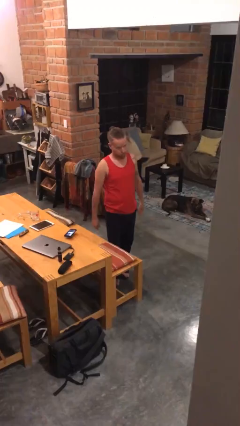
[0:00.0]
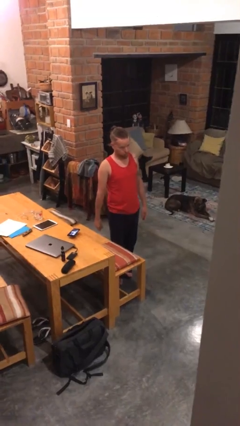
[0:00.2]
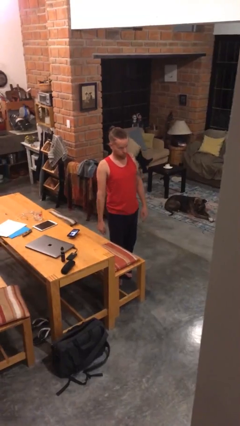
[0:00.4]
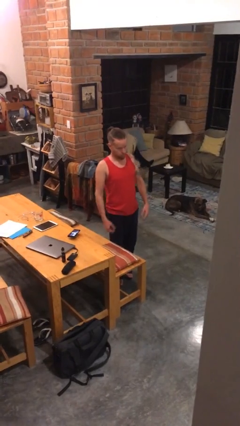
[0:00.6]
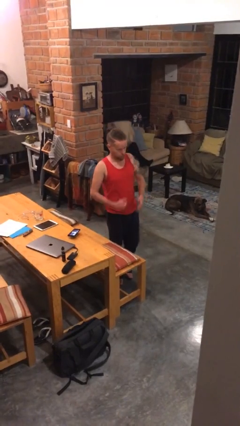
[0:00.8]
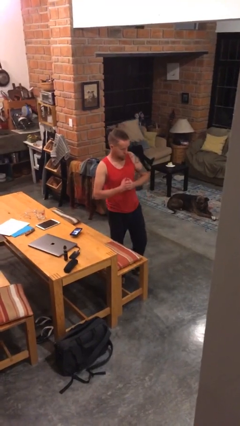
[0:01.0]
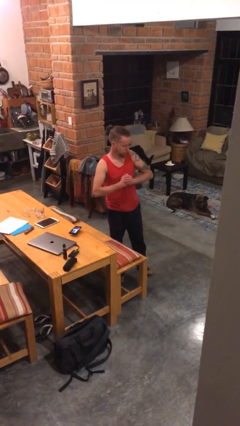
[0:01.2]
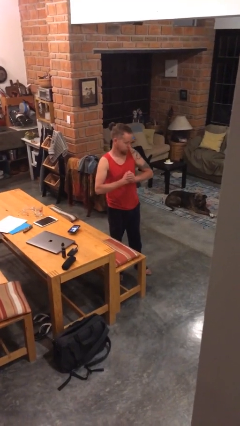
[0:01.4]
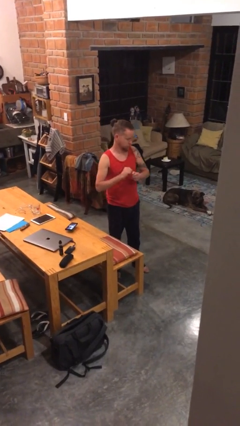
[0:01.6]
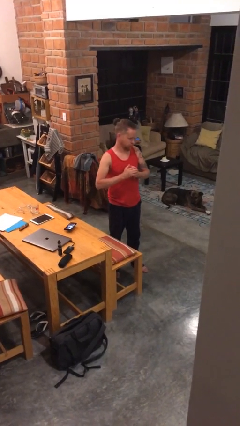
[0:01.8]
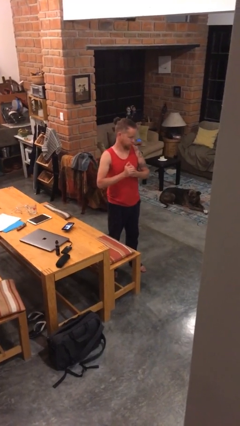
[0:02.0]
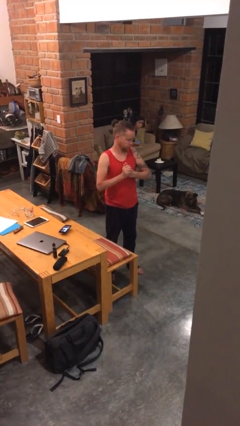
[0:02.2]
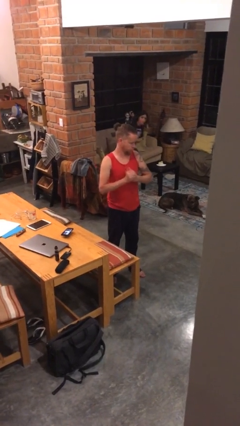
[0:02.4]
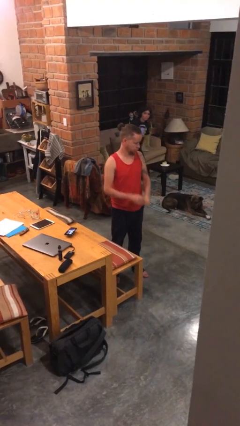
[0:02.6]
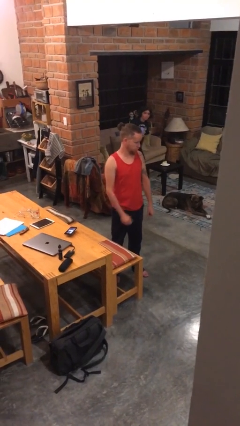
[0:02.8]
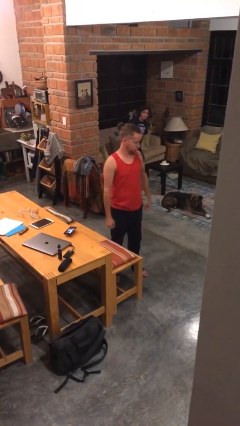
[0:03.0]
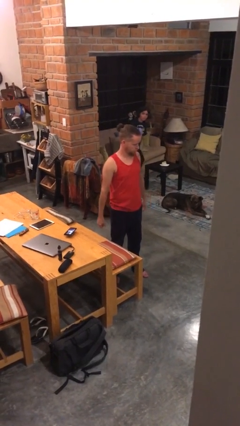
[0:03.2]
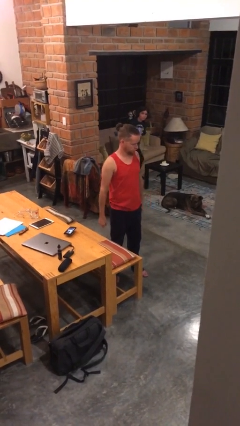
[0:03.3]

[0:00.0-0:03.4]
person cracks knuckles

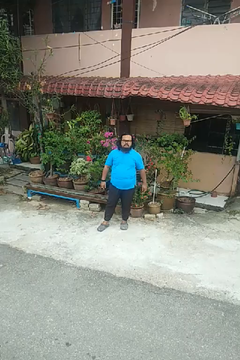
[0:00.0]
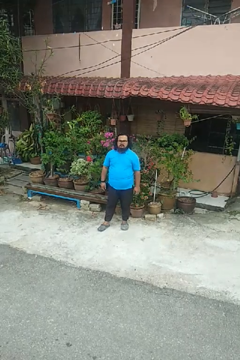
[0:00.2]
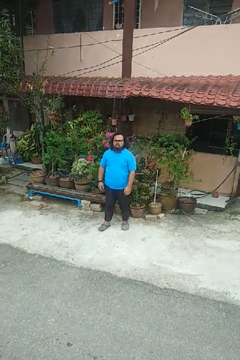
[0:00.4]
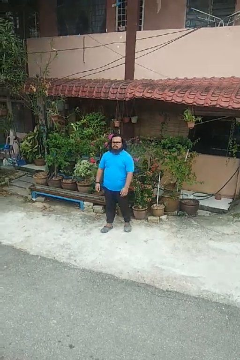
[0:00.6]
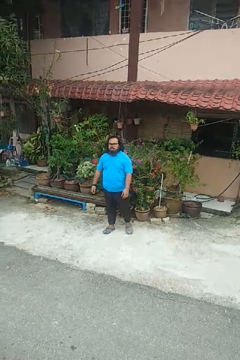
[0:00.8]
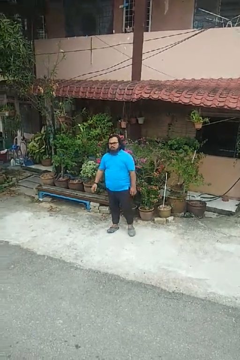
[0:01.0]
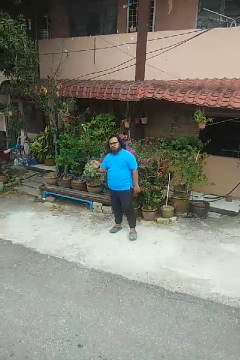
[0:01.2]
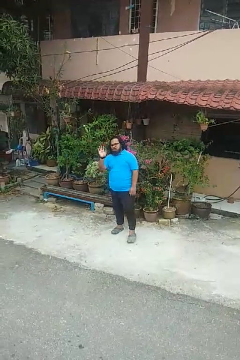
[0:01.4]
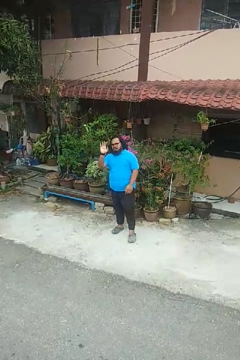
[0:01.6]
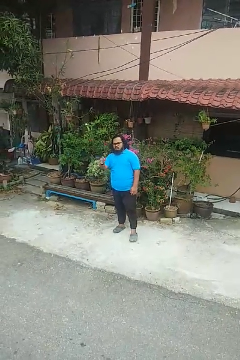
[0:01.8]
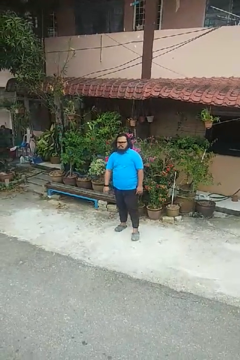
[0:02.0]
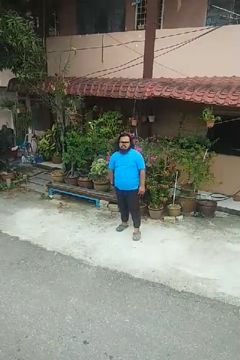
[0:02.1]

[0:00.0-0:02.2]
person waves at person

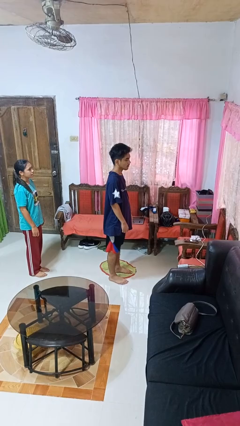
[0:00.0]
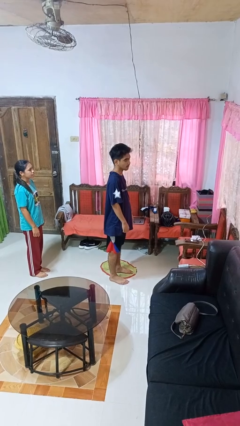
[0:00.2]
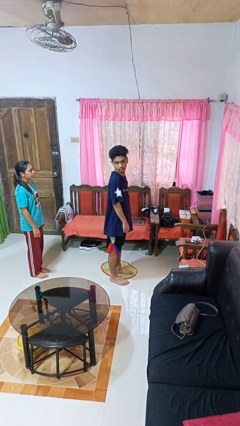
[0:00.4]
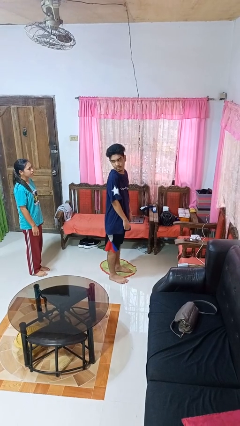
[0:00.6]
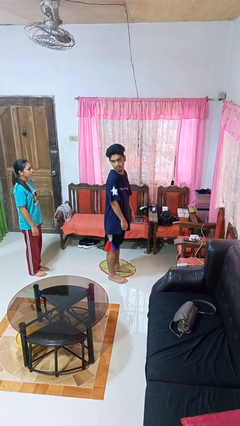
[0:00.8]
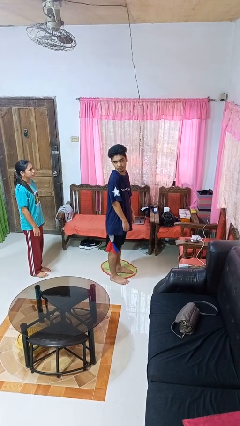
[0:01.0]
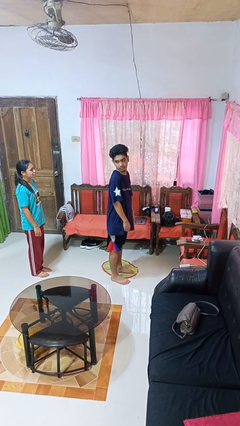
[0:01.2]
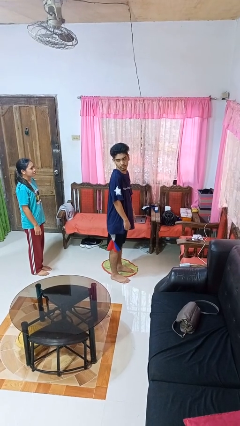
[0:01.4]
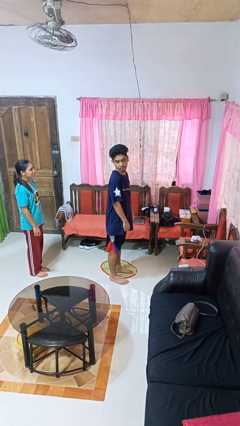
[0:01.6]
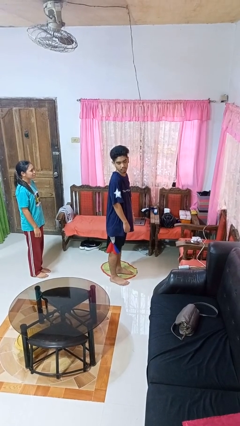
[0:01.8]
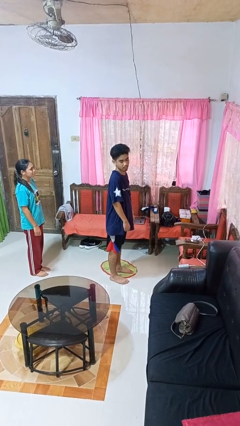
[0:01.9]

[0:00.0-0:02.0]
person looks over shoulder

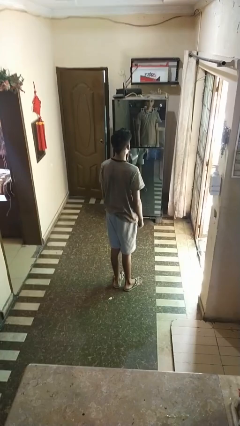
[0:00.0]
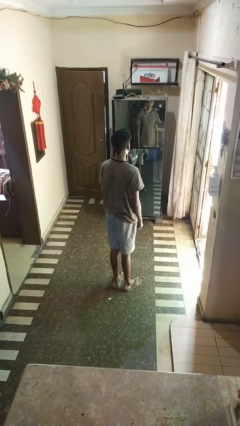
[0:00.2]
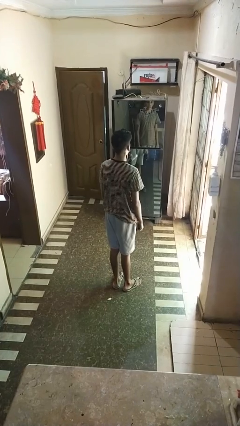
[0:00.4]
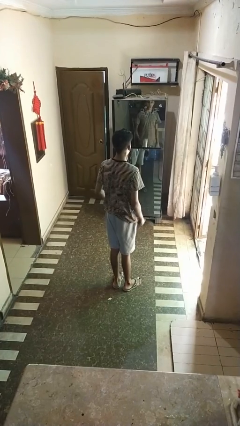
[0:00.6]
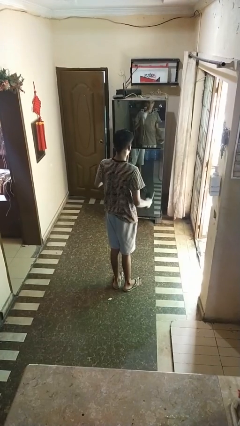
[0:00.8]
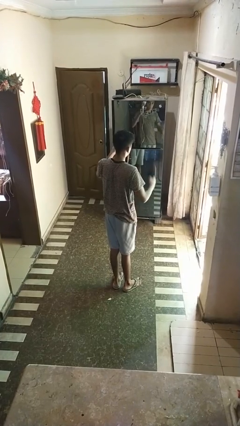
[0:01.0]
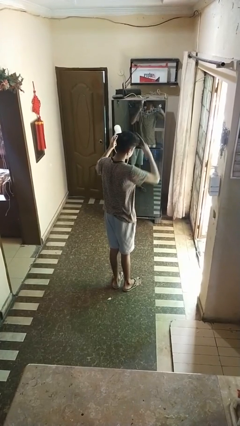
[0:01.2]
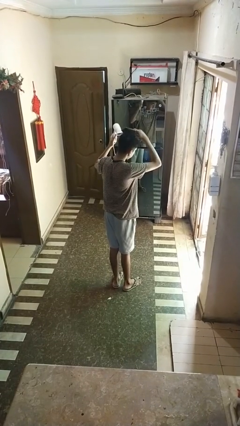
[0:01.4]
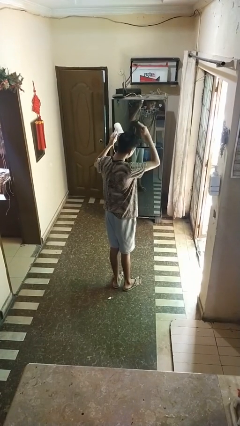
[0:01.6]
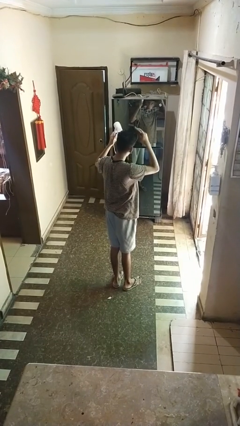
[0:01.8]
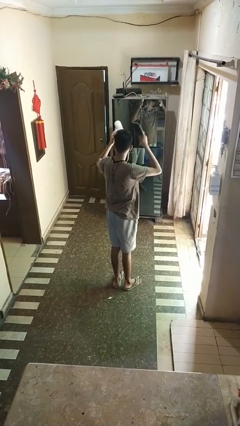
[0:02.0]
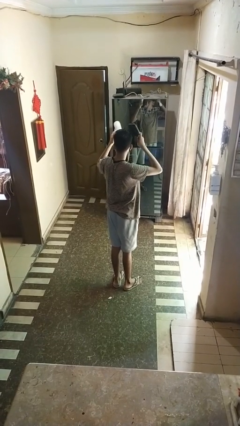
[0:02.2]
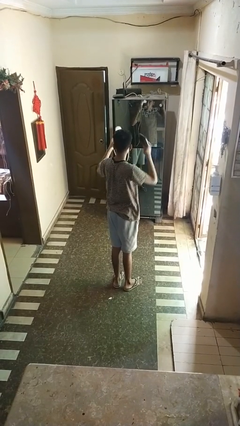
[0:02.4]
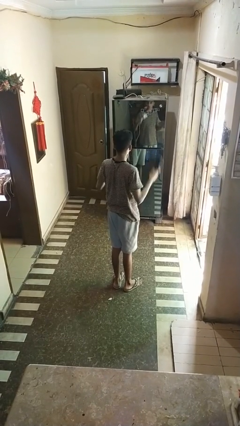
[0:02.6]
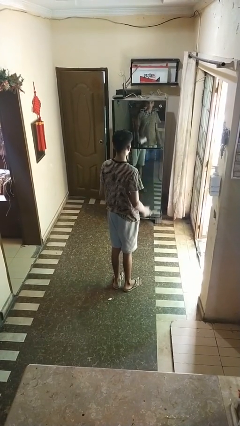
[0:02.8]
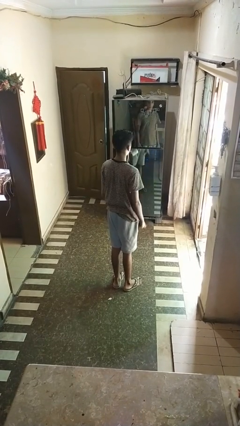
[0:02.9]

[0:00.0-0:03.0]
person dries hair with hairdryer

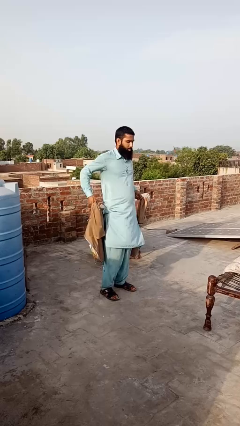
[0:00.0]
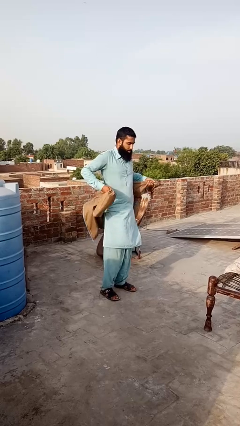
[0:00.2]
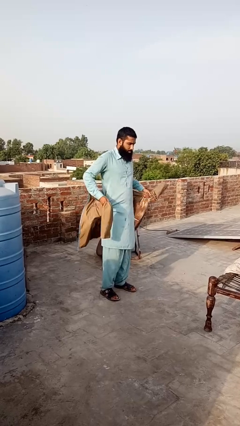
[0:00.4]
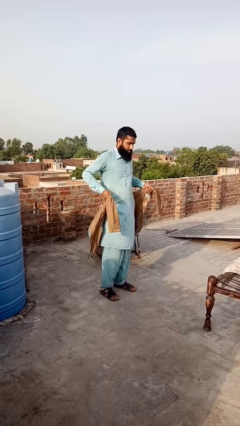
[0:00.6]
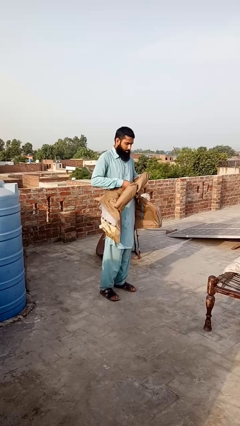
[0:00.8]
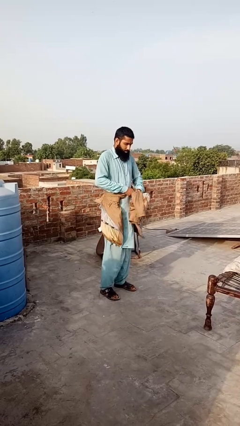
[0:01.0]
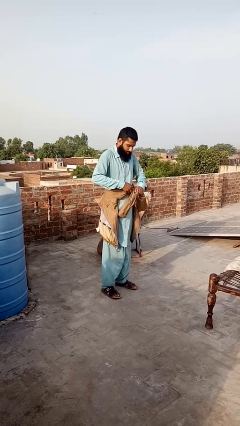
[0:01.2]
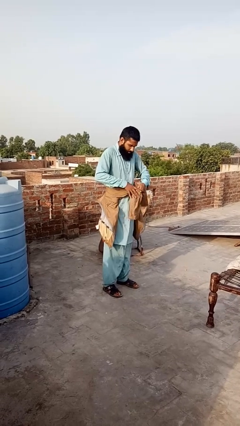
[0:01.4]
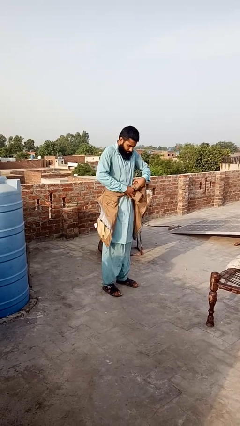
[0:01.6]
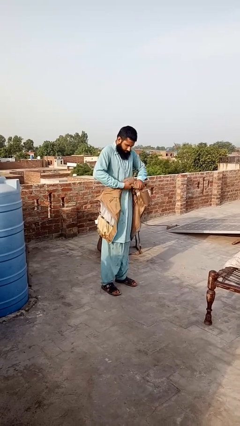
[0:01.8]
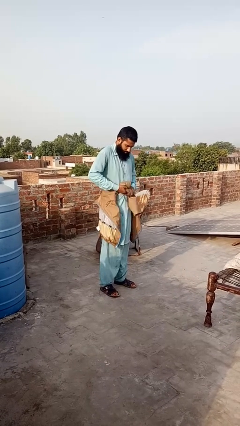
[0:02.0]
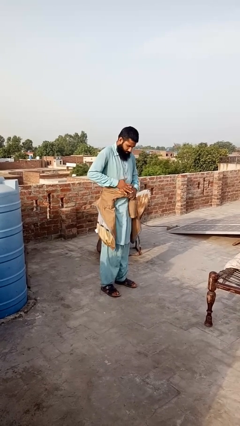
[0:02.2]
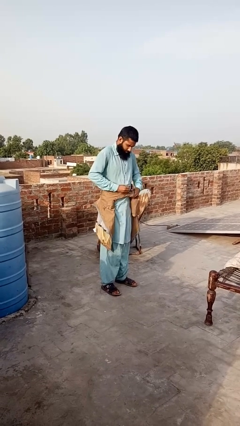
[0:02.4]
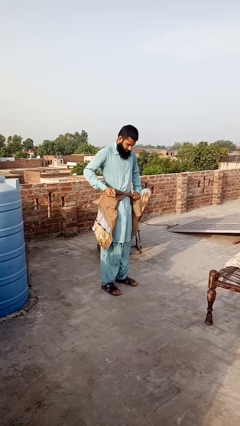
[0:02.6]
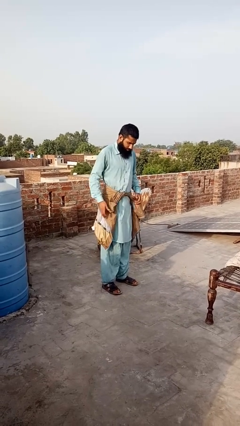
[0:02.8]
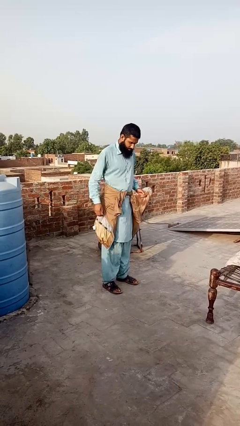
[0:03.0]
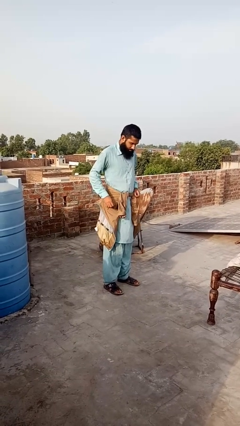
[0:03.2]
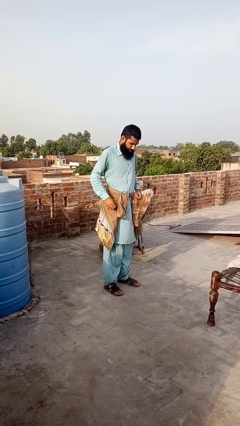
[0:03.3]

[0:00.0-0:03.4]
person ties jacket around waist

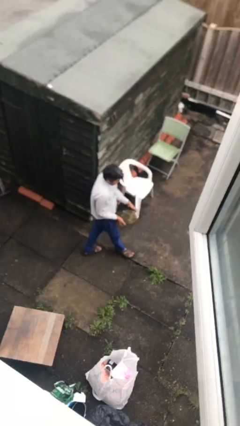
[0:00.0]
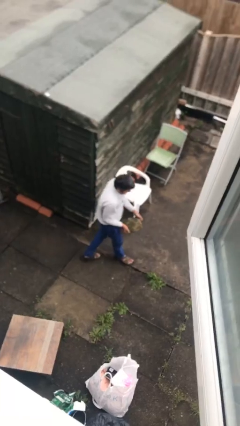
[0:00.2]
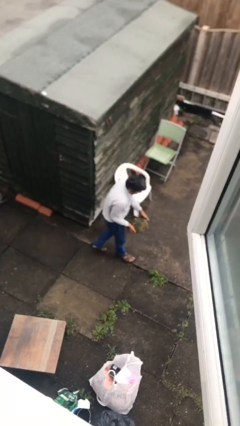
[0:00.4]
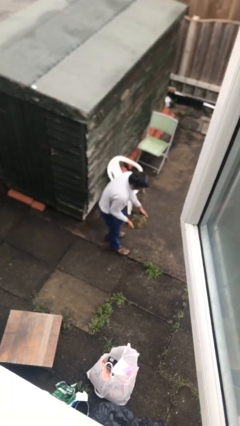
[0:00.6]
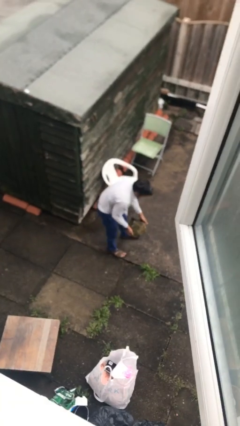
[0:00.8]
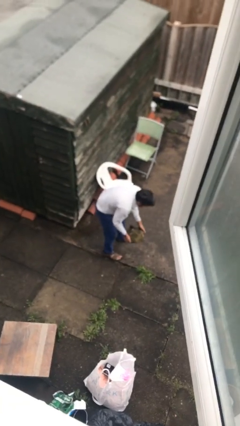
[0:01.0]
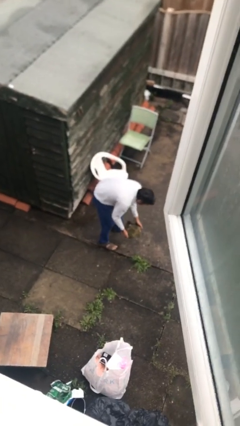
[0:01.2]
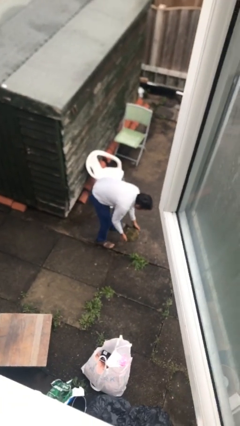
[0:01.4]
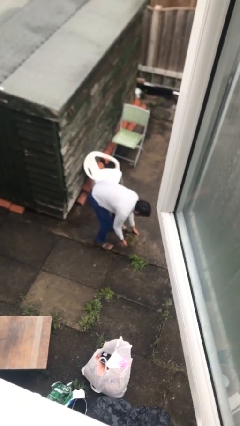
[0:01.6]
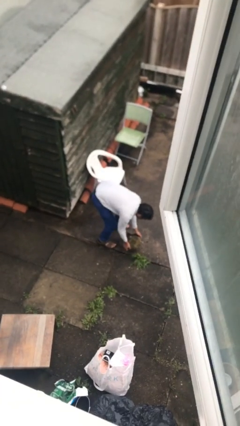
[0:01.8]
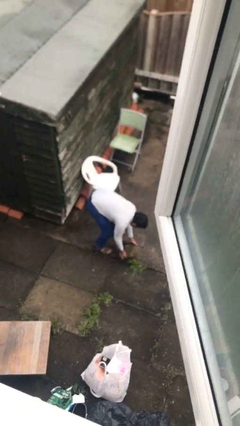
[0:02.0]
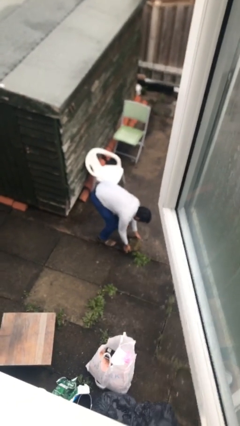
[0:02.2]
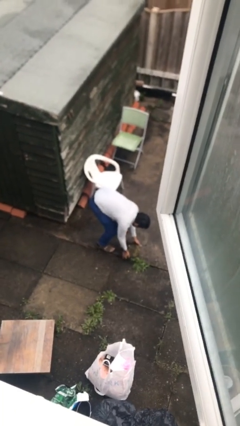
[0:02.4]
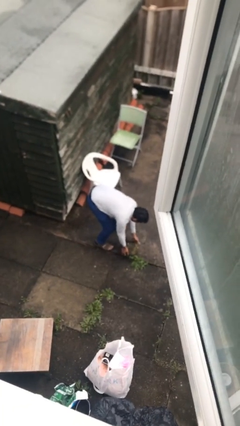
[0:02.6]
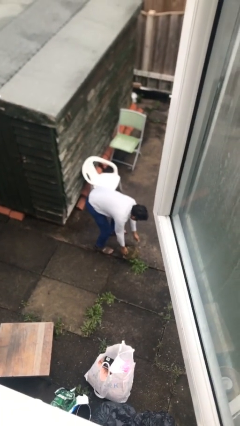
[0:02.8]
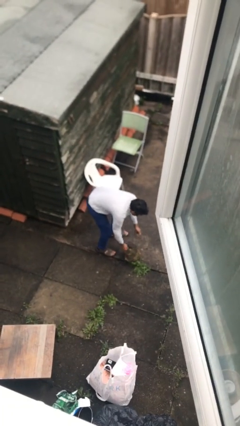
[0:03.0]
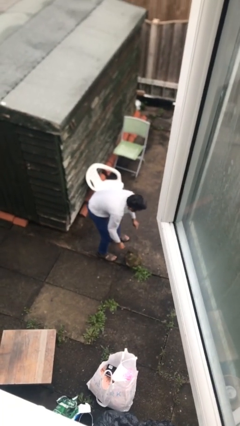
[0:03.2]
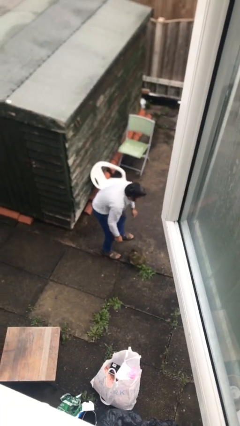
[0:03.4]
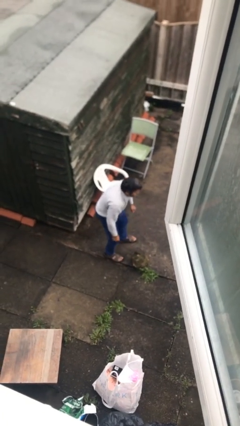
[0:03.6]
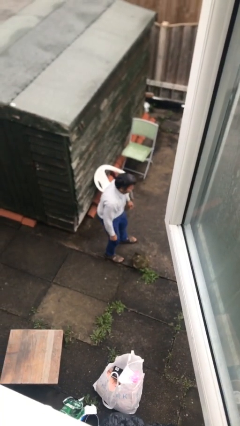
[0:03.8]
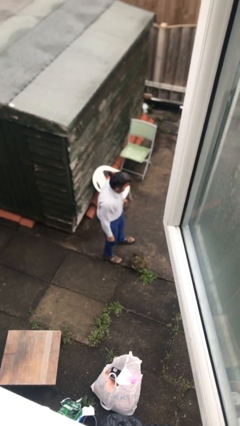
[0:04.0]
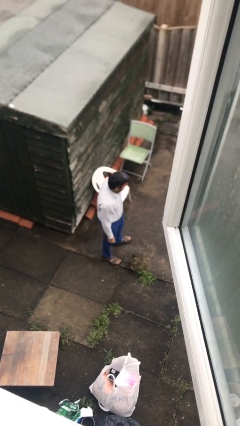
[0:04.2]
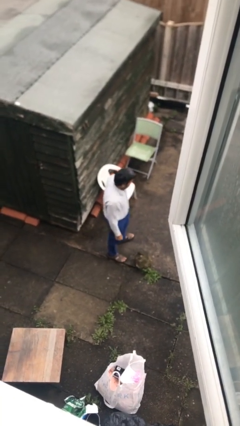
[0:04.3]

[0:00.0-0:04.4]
person puts down object on floor
